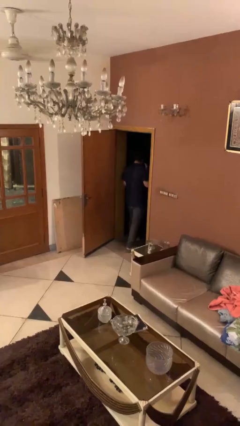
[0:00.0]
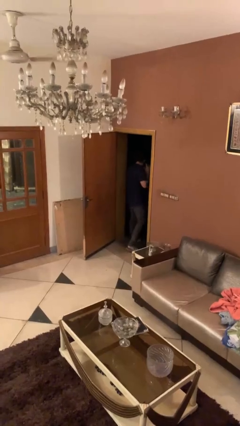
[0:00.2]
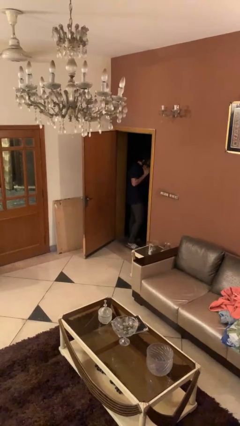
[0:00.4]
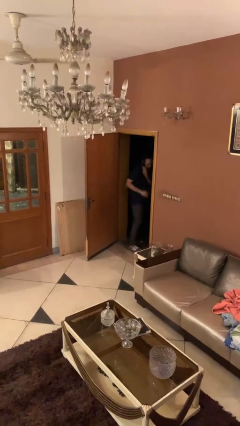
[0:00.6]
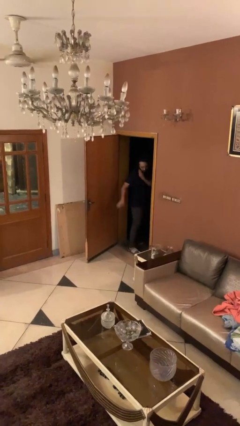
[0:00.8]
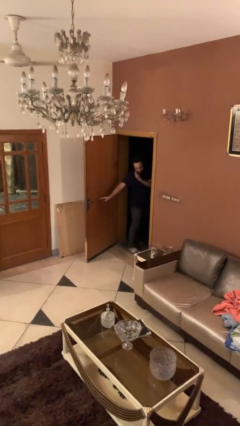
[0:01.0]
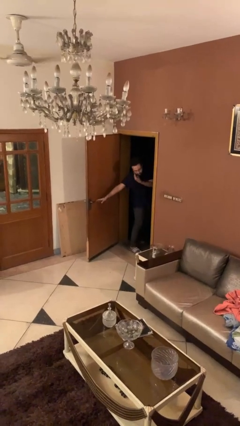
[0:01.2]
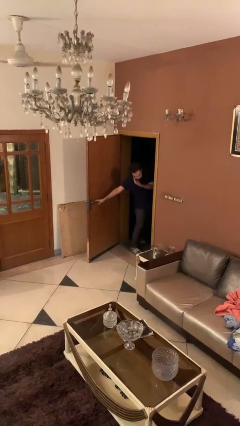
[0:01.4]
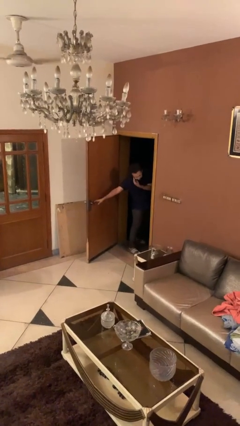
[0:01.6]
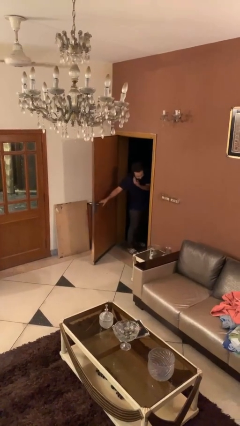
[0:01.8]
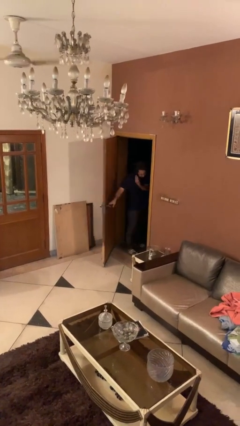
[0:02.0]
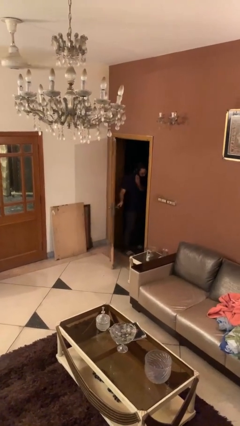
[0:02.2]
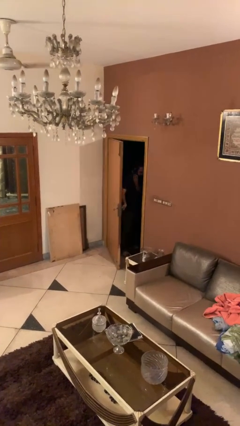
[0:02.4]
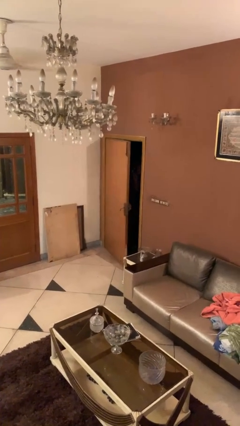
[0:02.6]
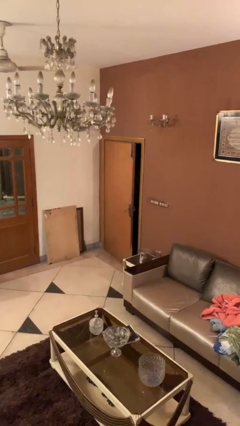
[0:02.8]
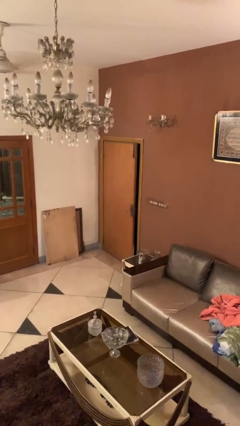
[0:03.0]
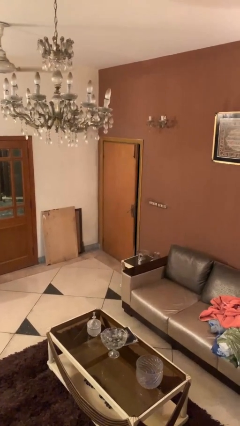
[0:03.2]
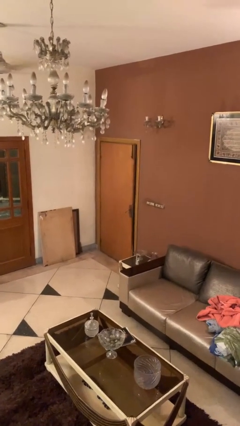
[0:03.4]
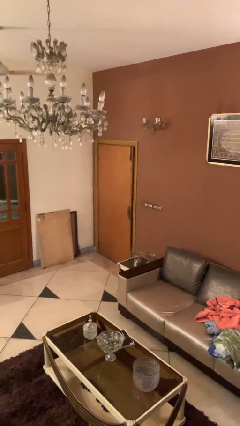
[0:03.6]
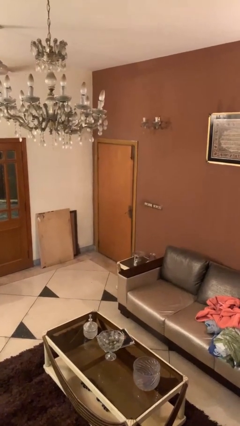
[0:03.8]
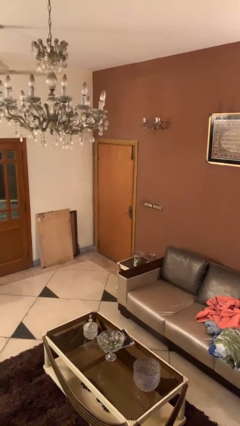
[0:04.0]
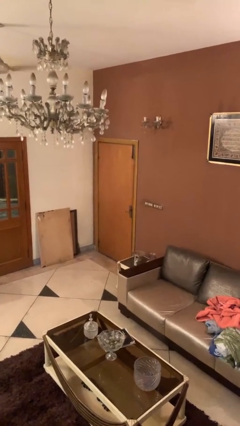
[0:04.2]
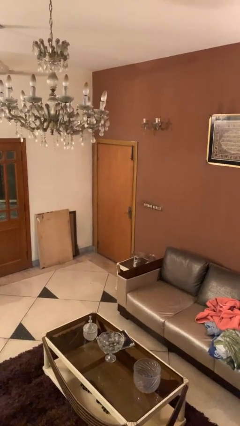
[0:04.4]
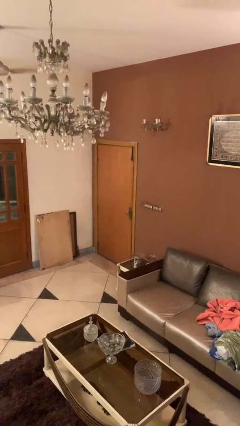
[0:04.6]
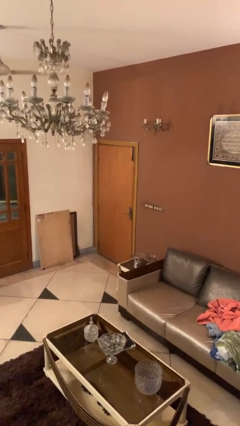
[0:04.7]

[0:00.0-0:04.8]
person closes facility door

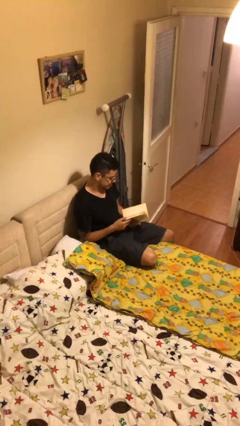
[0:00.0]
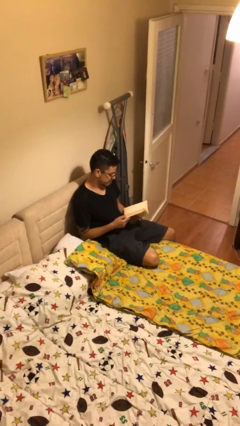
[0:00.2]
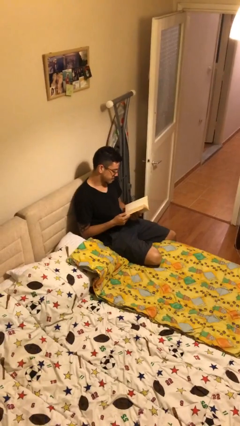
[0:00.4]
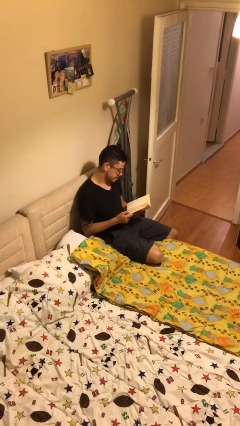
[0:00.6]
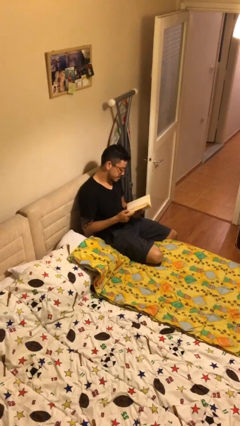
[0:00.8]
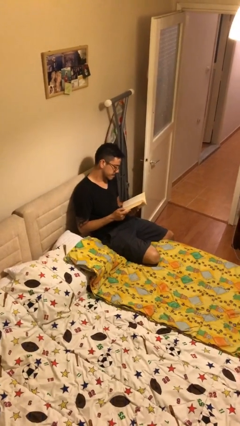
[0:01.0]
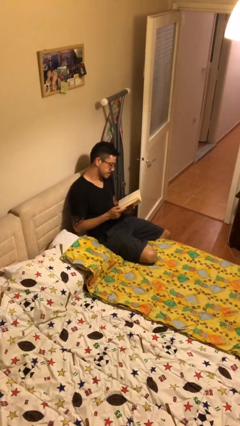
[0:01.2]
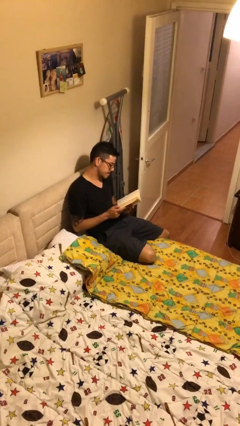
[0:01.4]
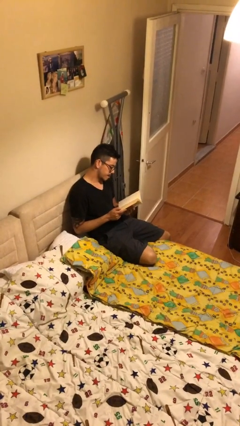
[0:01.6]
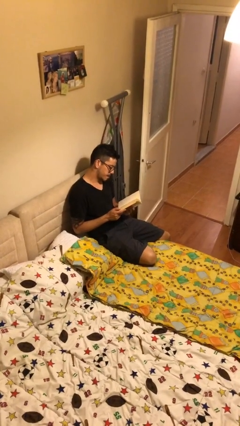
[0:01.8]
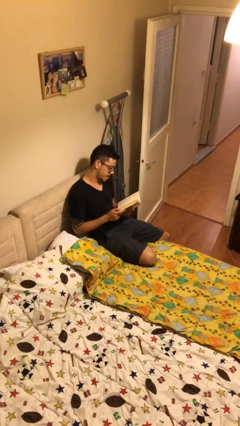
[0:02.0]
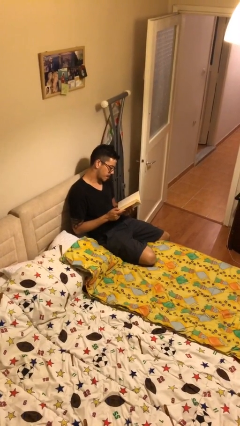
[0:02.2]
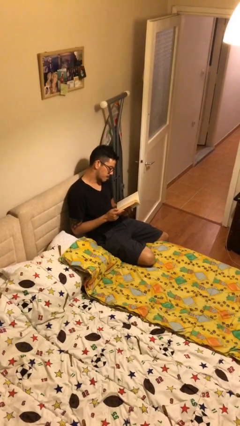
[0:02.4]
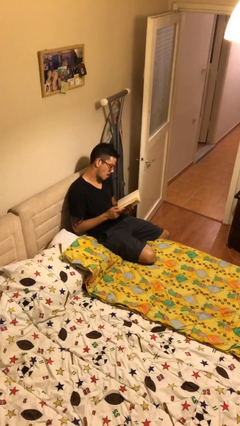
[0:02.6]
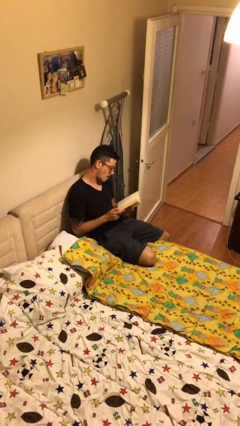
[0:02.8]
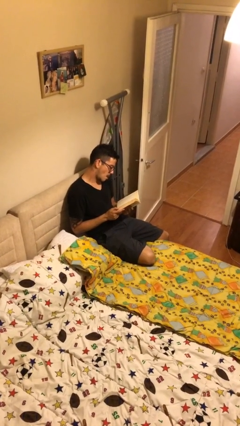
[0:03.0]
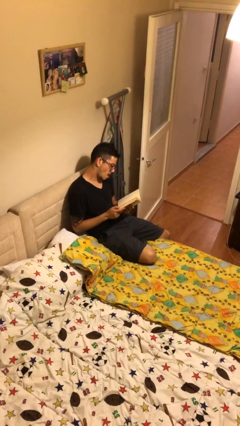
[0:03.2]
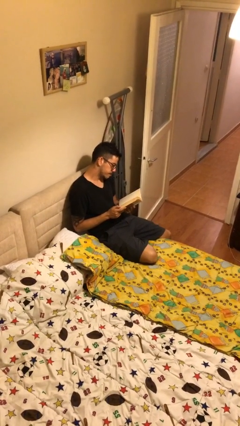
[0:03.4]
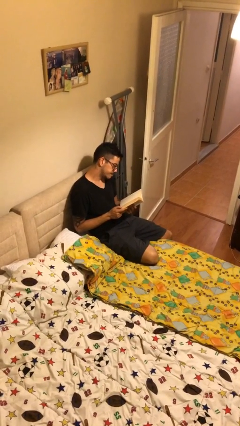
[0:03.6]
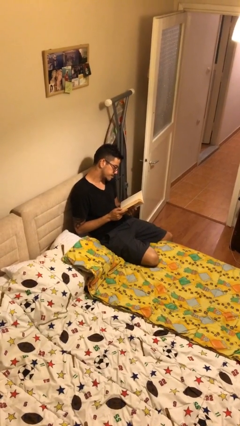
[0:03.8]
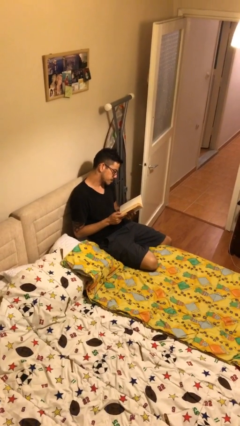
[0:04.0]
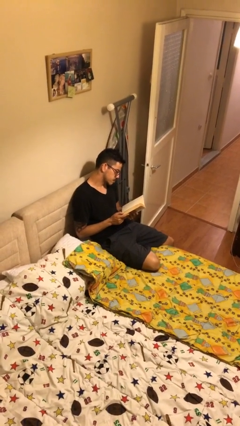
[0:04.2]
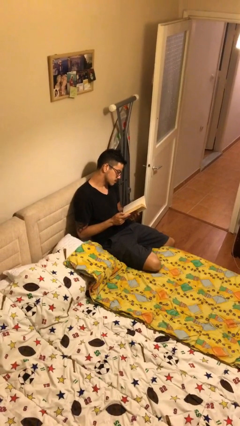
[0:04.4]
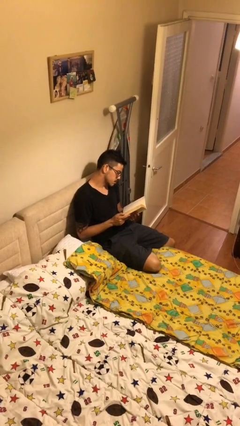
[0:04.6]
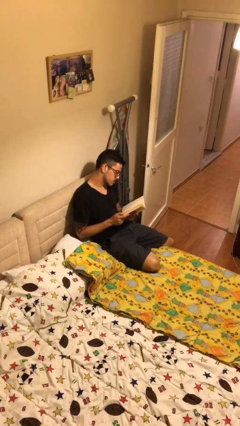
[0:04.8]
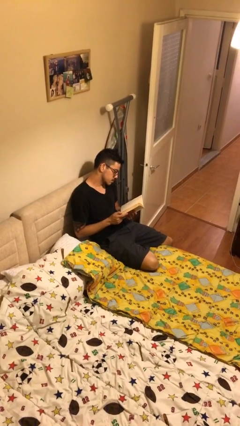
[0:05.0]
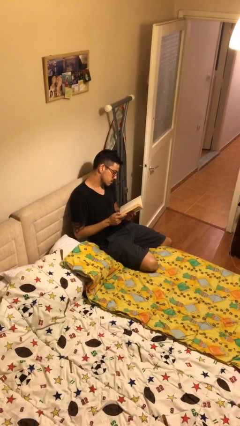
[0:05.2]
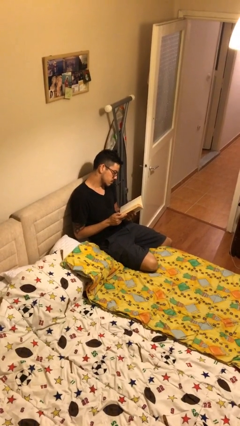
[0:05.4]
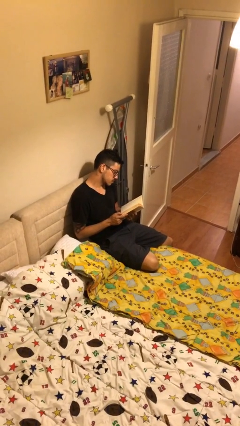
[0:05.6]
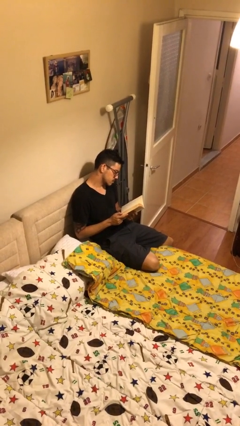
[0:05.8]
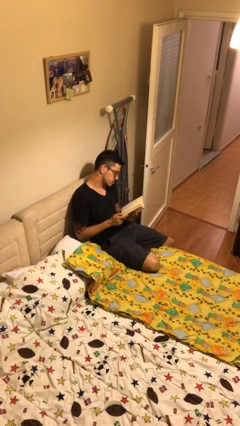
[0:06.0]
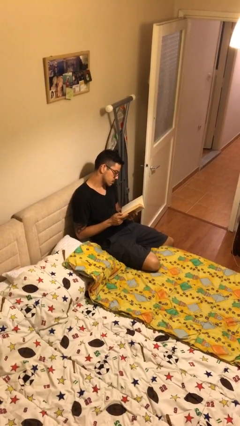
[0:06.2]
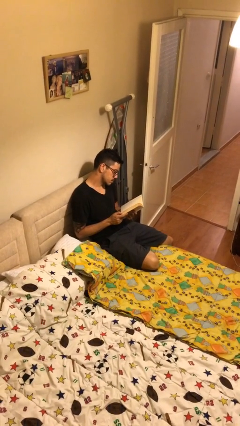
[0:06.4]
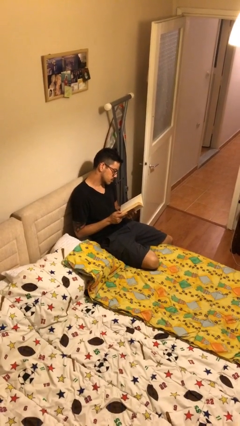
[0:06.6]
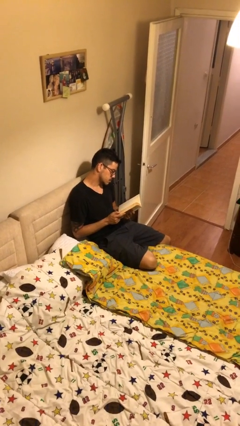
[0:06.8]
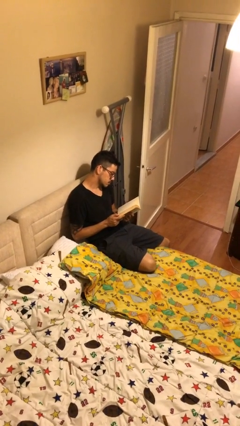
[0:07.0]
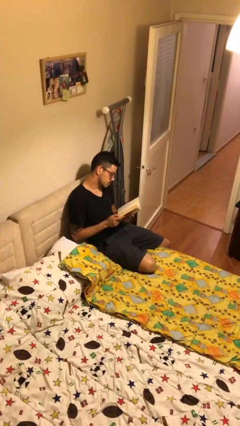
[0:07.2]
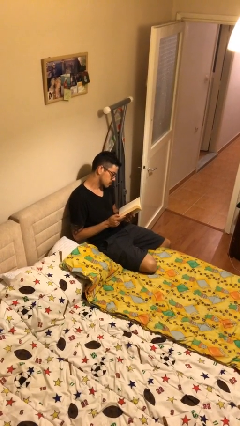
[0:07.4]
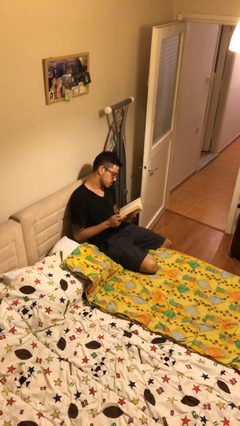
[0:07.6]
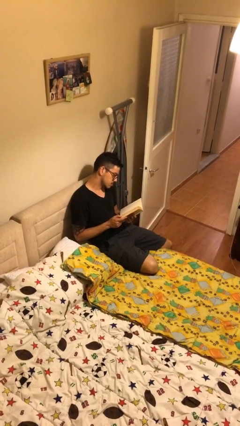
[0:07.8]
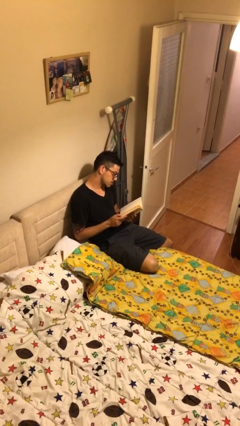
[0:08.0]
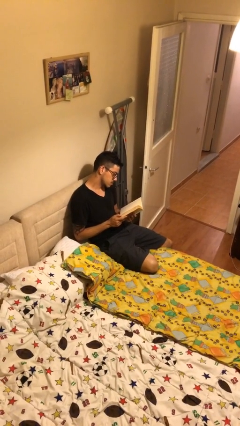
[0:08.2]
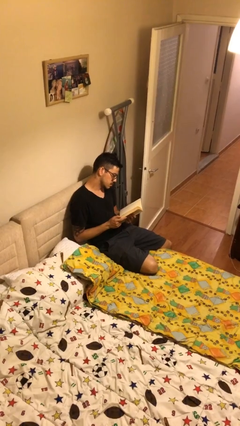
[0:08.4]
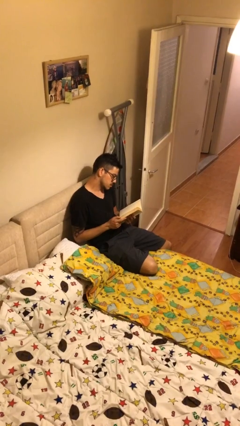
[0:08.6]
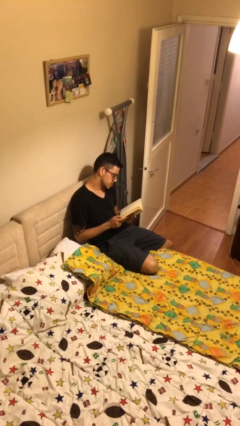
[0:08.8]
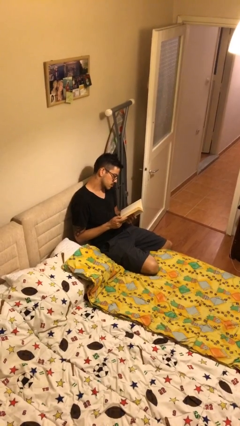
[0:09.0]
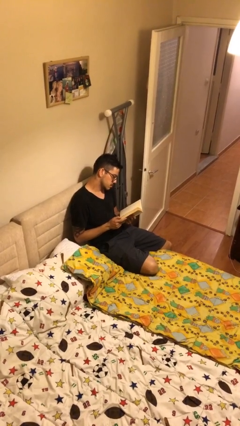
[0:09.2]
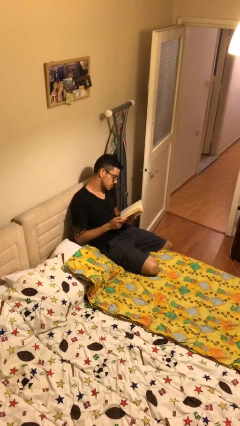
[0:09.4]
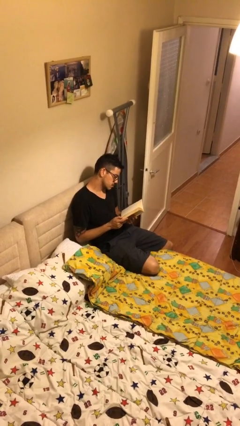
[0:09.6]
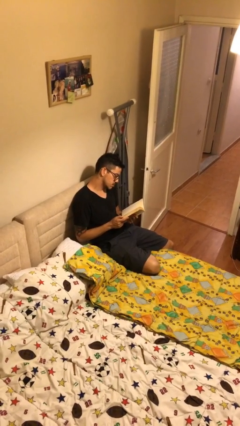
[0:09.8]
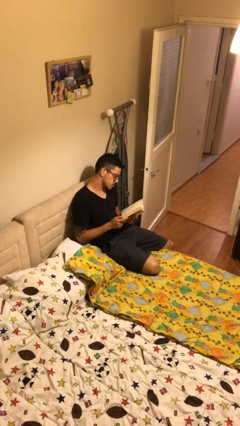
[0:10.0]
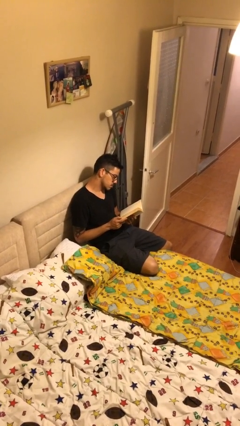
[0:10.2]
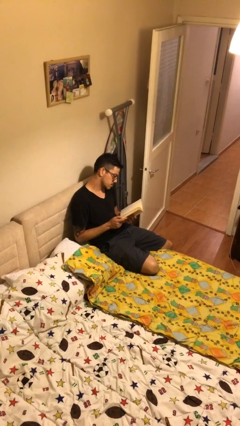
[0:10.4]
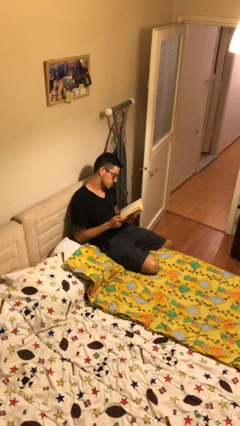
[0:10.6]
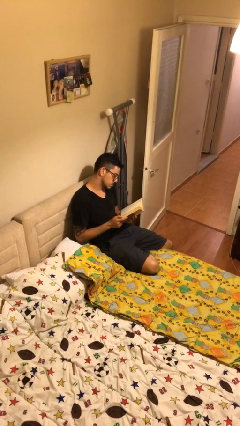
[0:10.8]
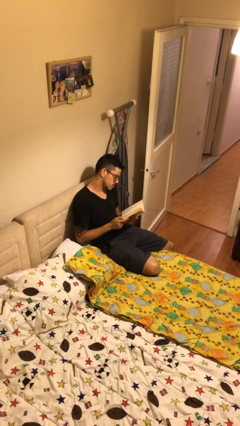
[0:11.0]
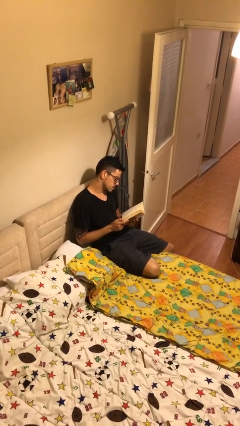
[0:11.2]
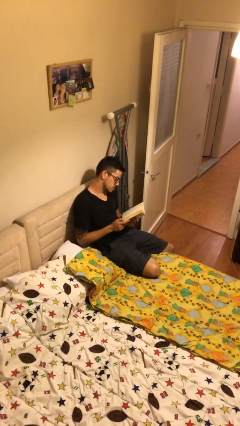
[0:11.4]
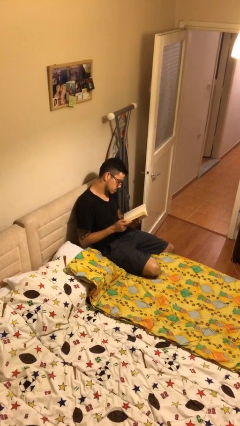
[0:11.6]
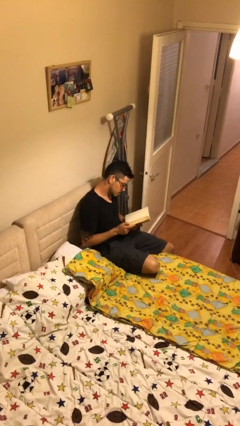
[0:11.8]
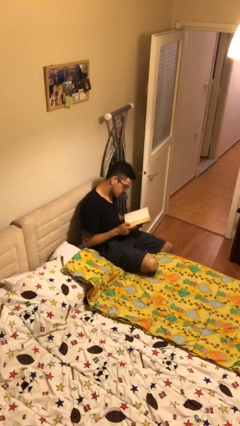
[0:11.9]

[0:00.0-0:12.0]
person reads document

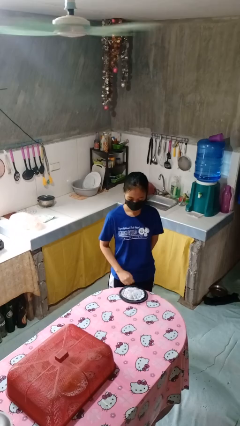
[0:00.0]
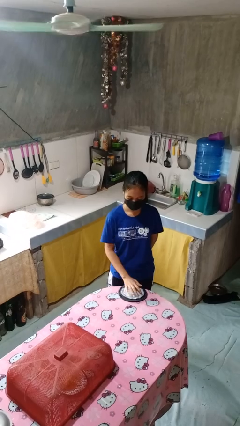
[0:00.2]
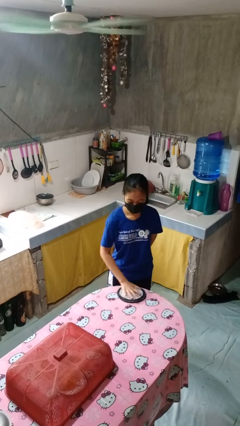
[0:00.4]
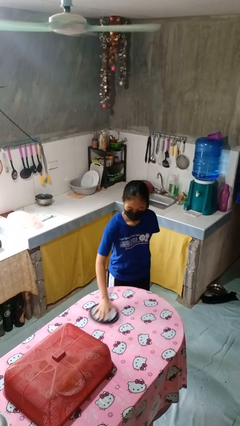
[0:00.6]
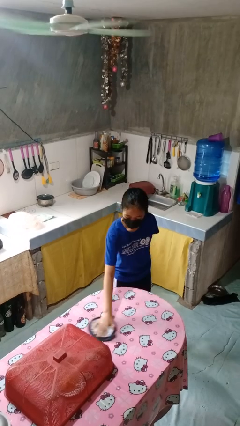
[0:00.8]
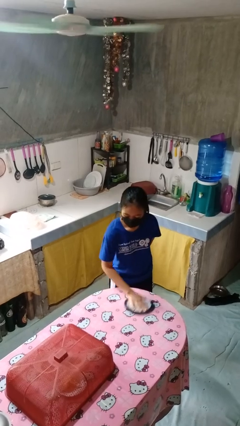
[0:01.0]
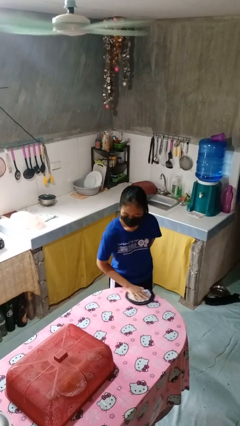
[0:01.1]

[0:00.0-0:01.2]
person cleans table with rag
